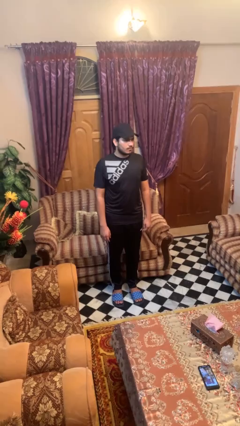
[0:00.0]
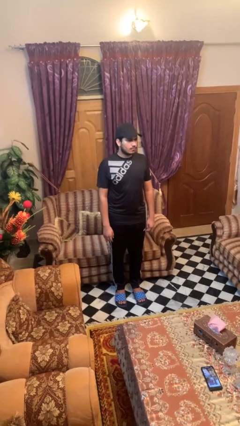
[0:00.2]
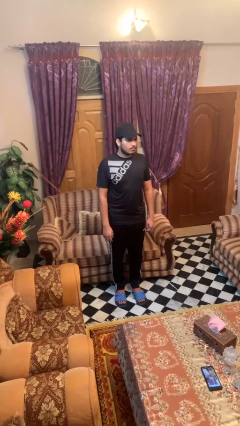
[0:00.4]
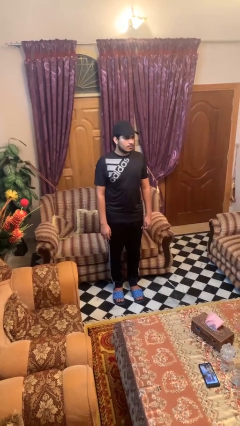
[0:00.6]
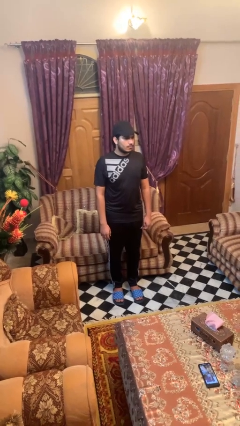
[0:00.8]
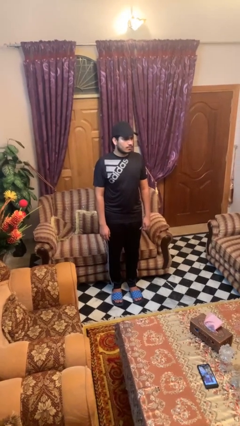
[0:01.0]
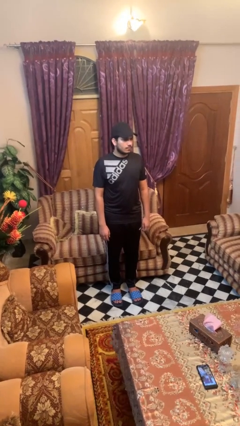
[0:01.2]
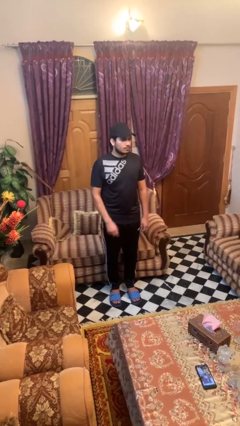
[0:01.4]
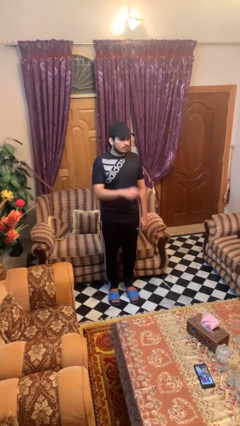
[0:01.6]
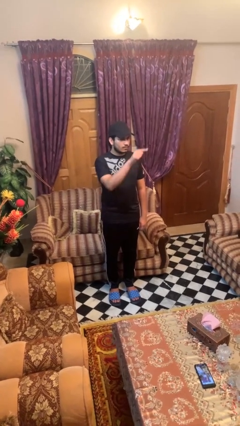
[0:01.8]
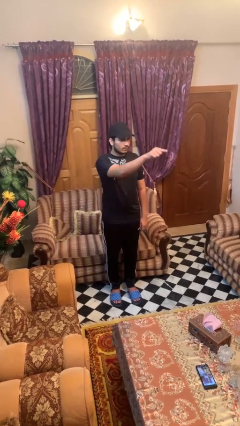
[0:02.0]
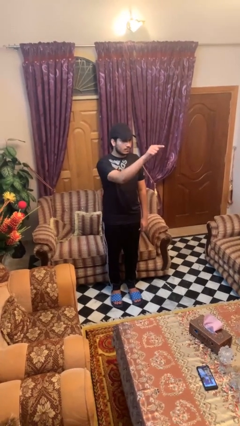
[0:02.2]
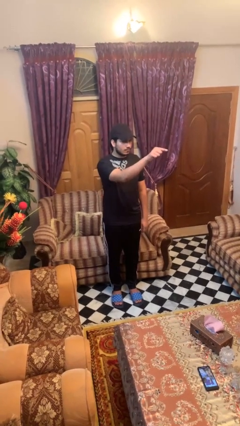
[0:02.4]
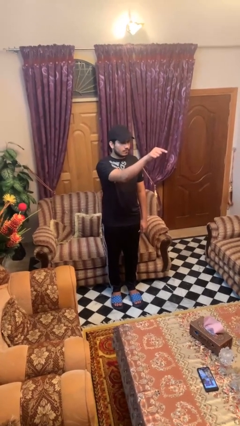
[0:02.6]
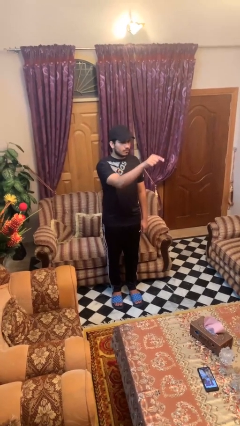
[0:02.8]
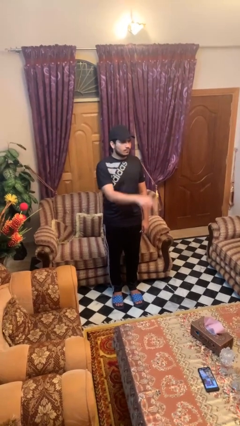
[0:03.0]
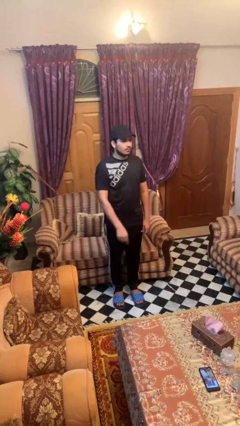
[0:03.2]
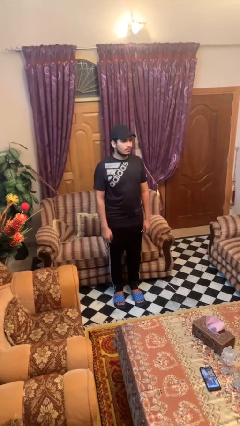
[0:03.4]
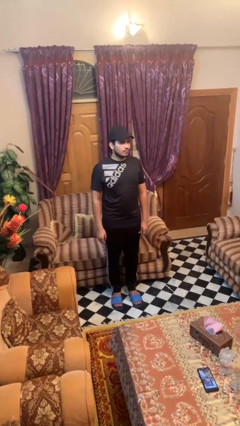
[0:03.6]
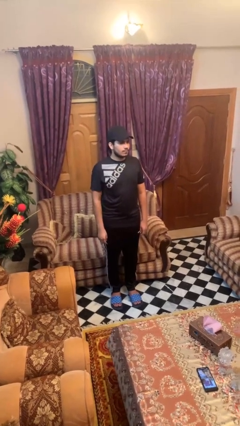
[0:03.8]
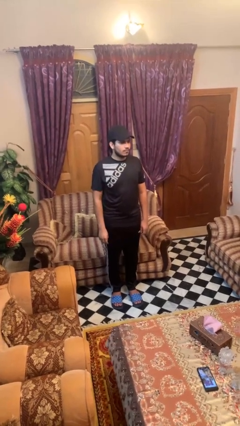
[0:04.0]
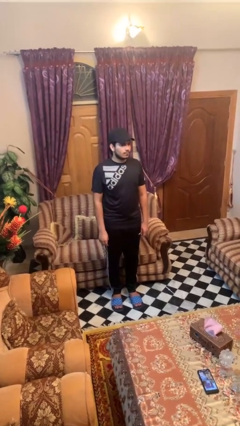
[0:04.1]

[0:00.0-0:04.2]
person points at person

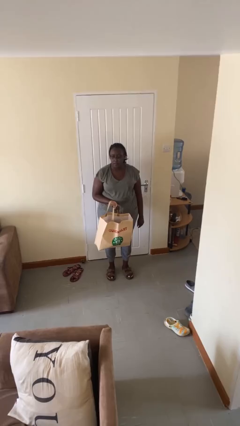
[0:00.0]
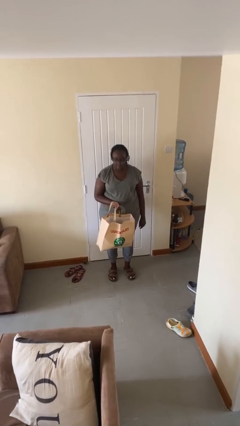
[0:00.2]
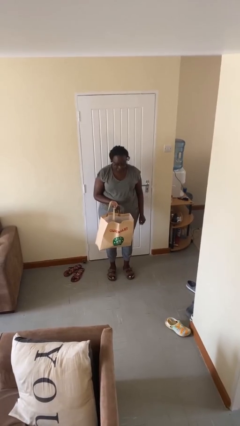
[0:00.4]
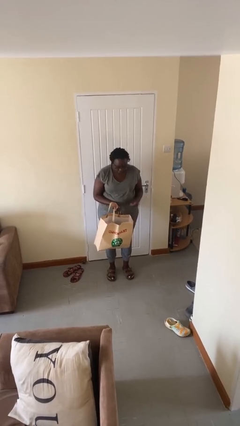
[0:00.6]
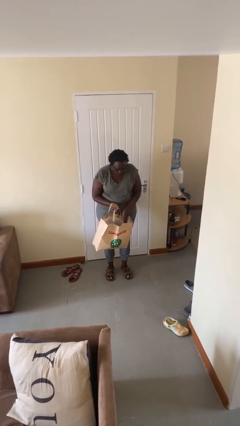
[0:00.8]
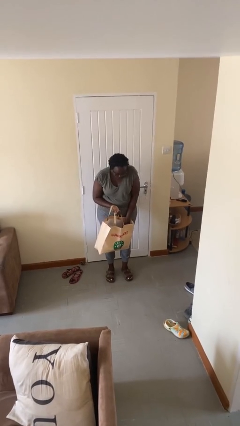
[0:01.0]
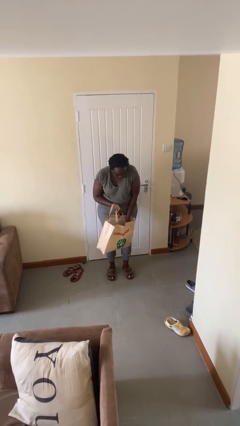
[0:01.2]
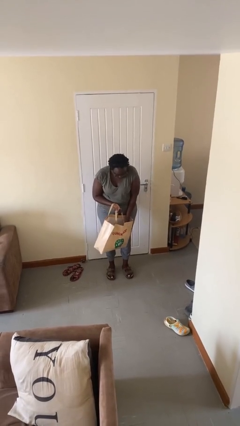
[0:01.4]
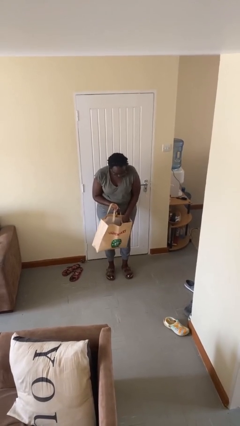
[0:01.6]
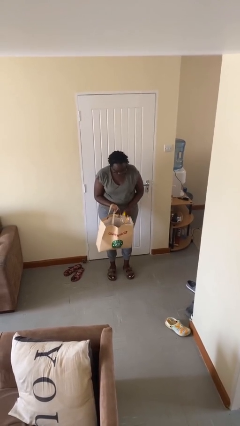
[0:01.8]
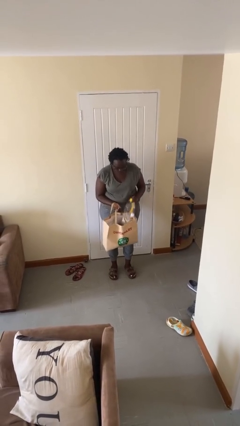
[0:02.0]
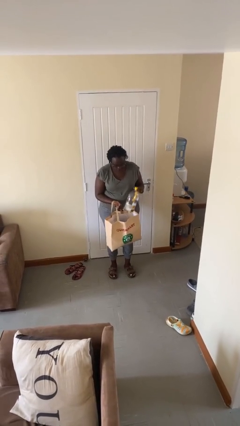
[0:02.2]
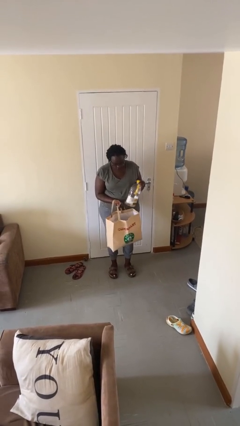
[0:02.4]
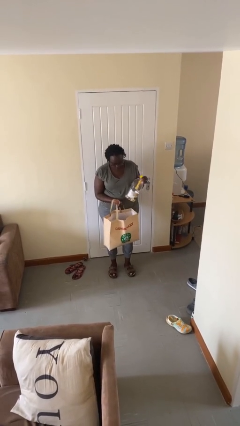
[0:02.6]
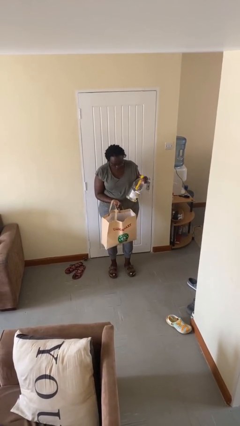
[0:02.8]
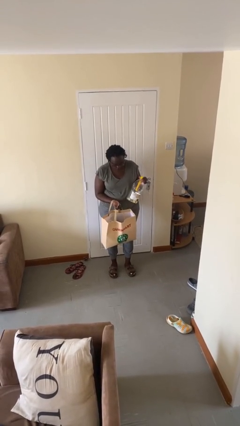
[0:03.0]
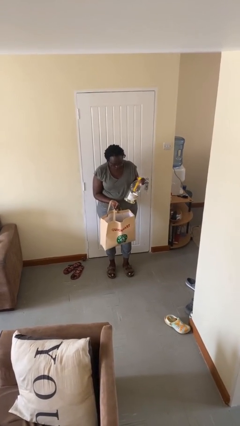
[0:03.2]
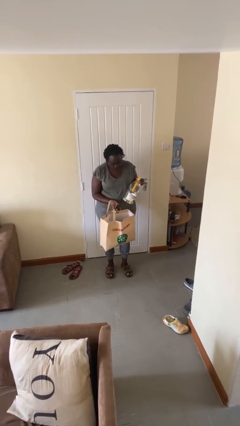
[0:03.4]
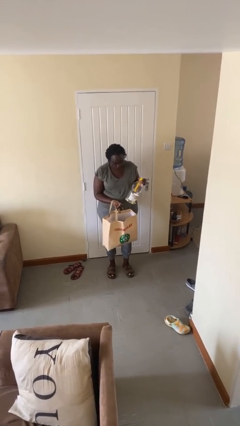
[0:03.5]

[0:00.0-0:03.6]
person takes object from bag

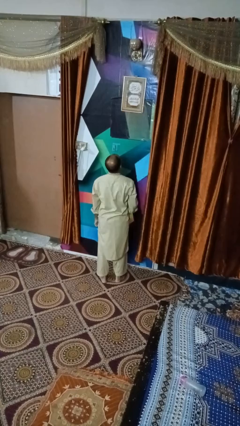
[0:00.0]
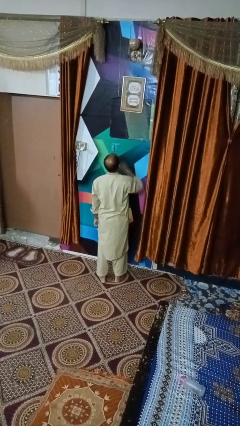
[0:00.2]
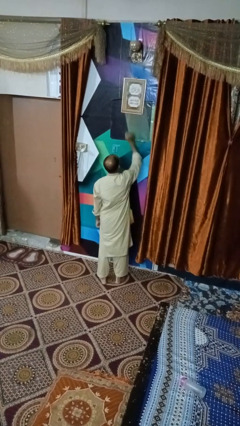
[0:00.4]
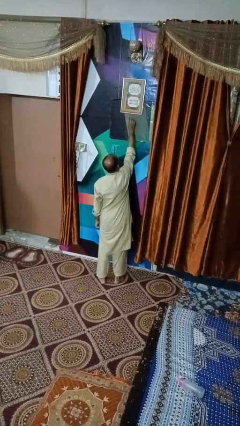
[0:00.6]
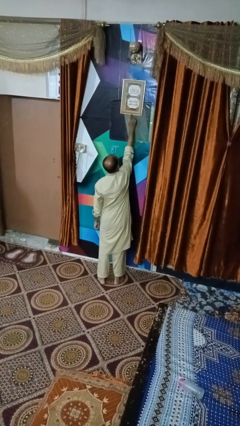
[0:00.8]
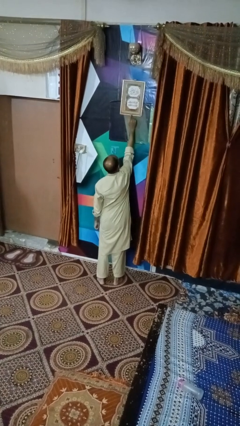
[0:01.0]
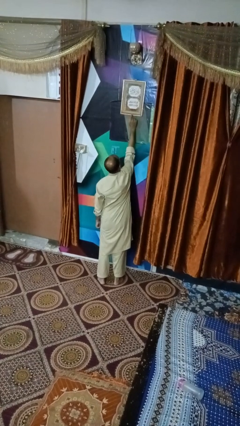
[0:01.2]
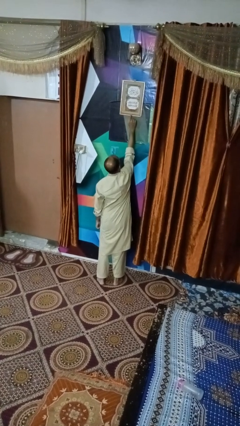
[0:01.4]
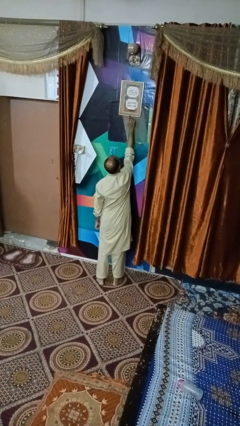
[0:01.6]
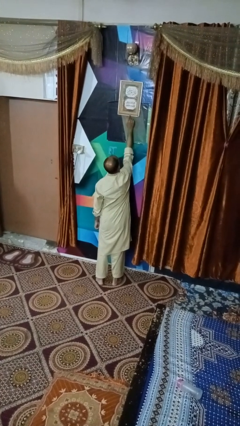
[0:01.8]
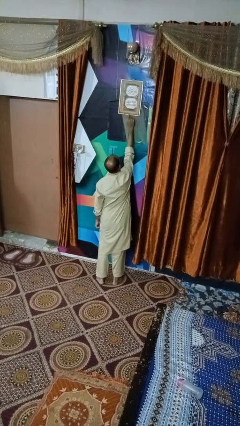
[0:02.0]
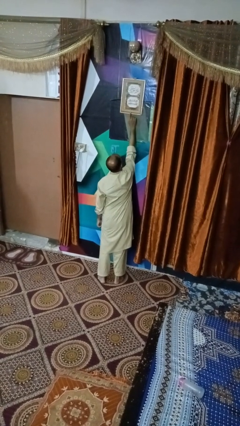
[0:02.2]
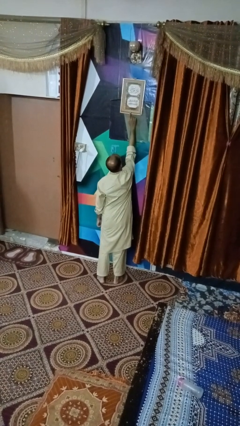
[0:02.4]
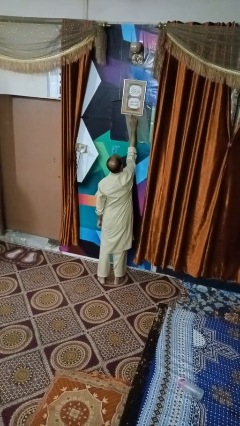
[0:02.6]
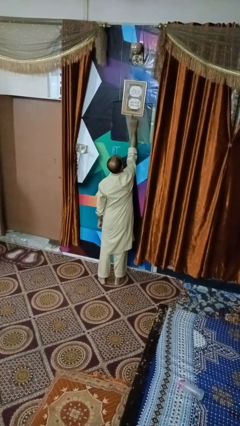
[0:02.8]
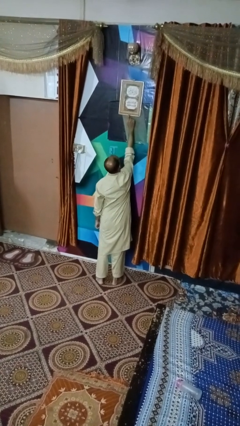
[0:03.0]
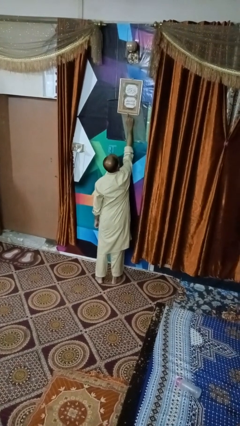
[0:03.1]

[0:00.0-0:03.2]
person taps object with finger

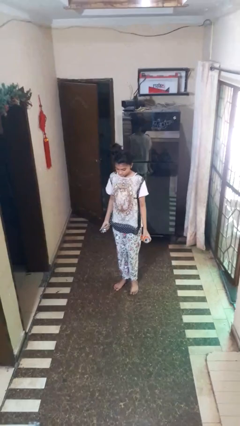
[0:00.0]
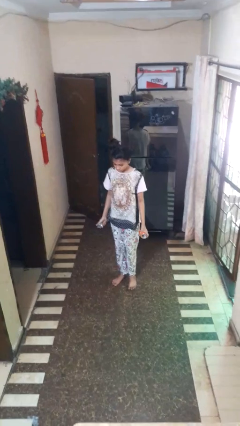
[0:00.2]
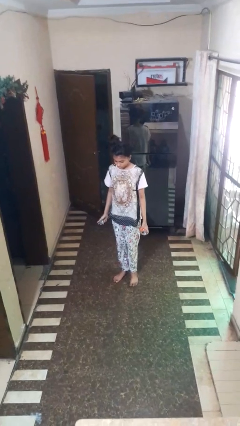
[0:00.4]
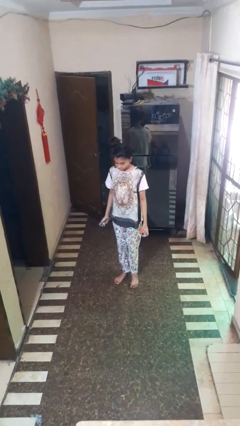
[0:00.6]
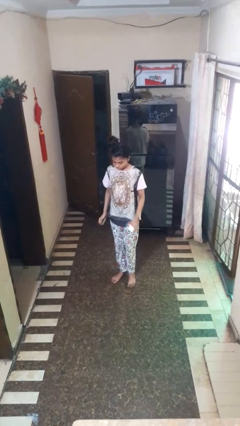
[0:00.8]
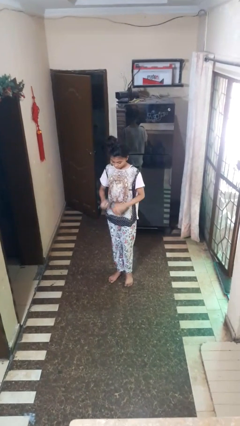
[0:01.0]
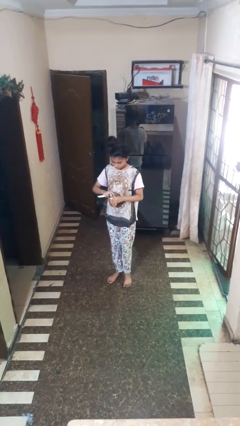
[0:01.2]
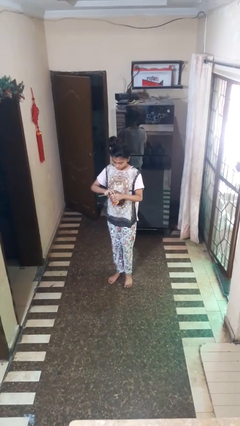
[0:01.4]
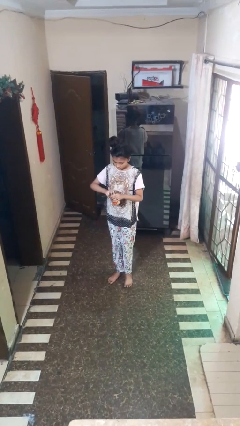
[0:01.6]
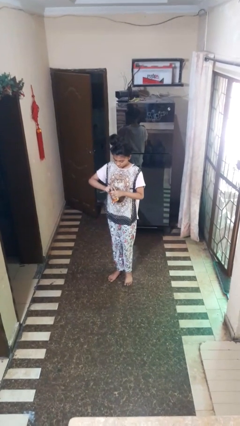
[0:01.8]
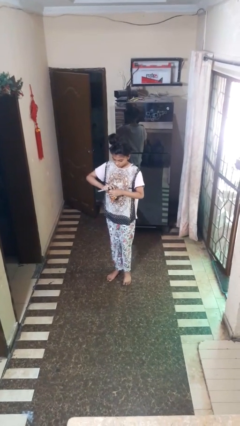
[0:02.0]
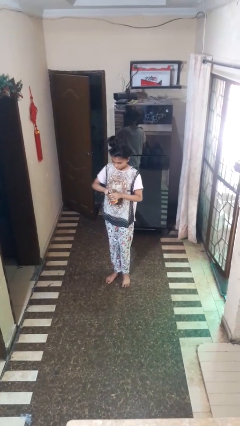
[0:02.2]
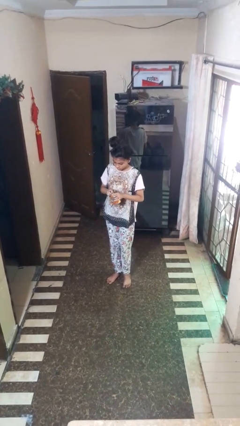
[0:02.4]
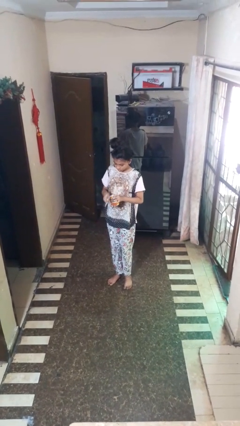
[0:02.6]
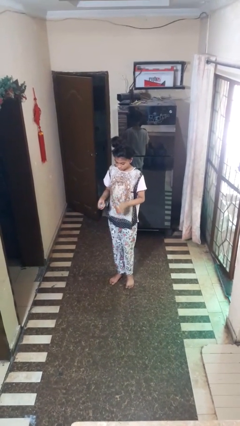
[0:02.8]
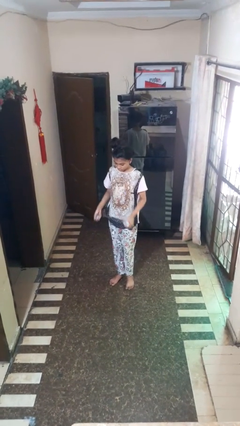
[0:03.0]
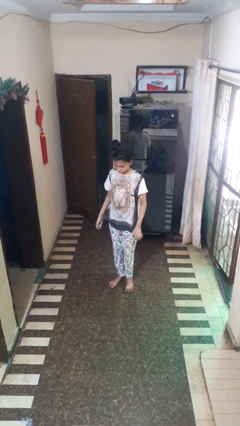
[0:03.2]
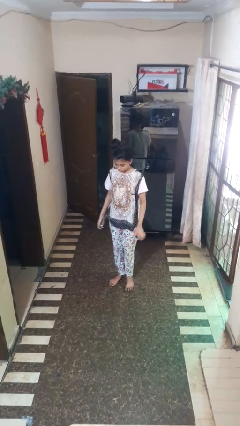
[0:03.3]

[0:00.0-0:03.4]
person opens can with can opener

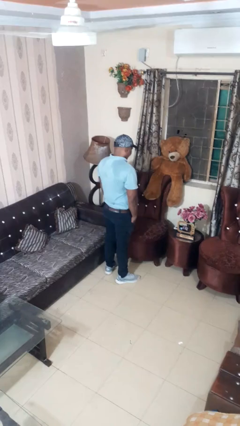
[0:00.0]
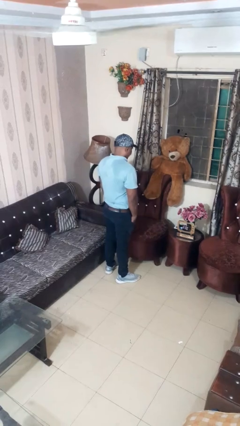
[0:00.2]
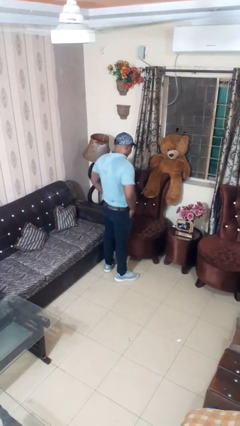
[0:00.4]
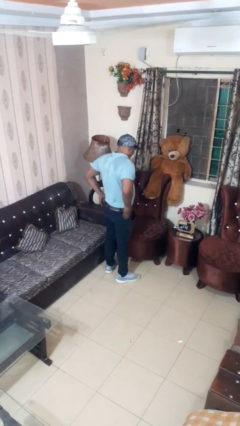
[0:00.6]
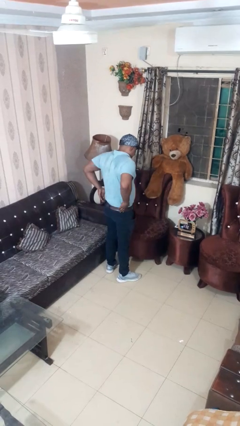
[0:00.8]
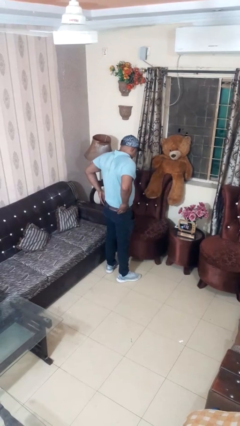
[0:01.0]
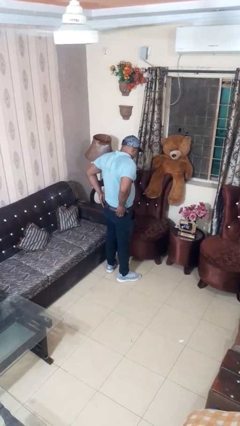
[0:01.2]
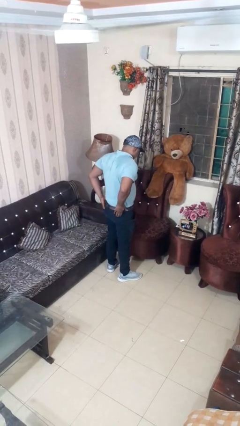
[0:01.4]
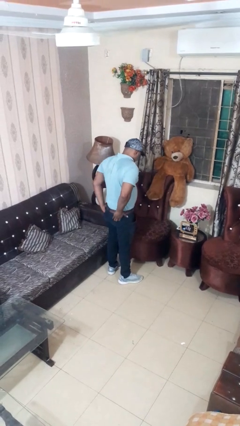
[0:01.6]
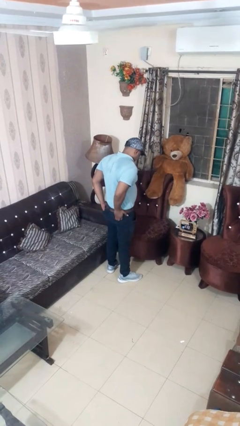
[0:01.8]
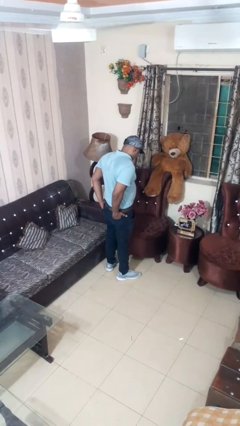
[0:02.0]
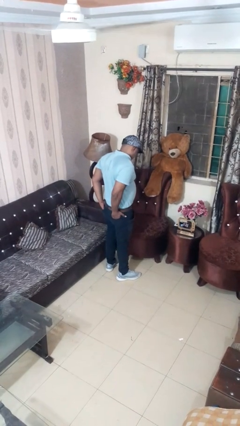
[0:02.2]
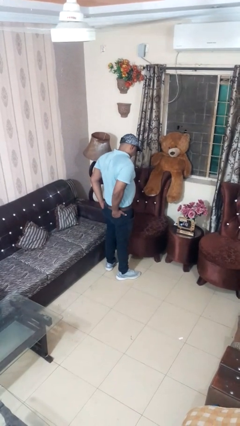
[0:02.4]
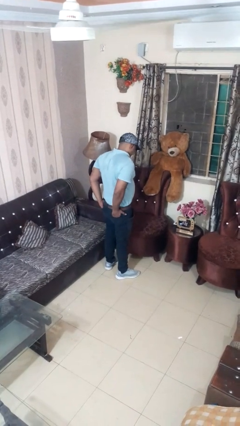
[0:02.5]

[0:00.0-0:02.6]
person puts hands in back pockets

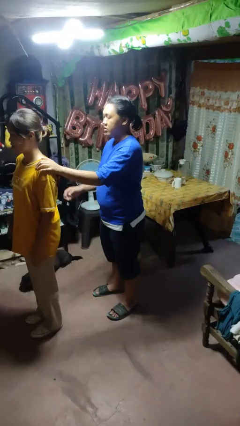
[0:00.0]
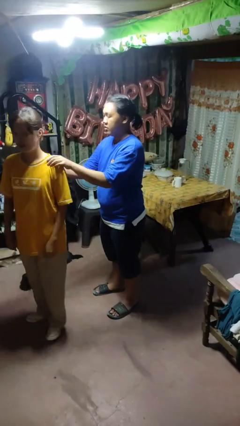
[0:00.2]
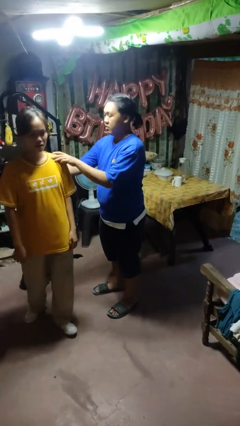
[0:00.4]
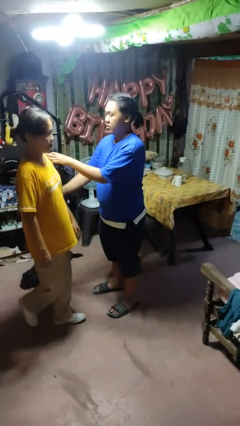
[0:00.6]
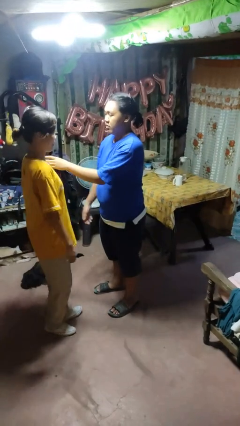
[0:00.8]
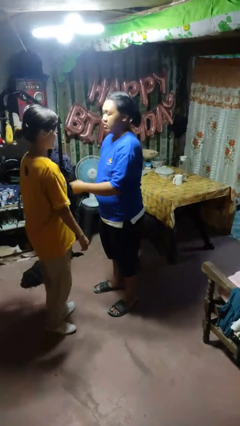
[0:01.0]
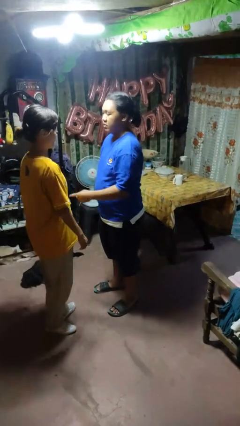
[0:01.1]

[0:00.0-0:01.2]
person spins person around
